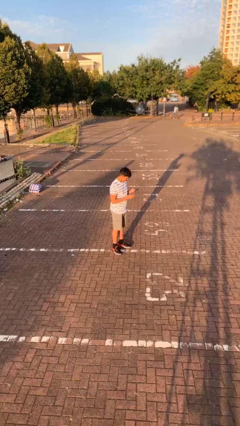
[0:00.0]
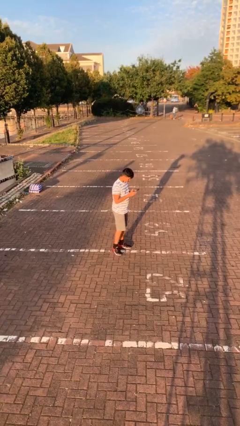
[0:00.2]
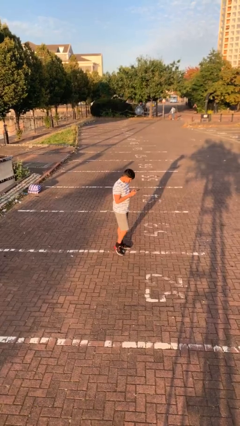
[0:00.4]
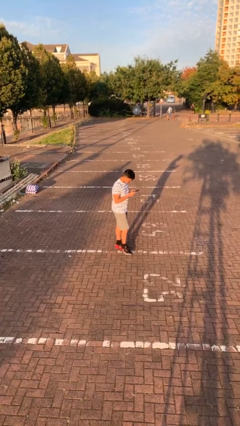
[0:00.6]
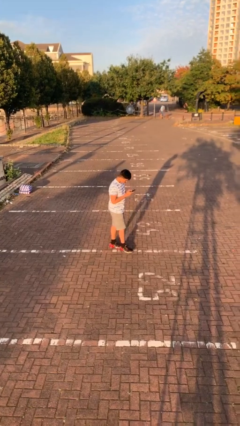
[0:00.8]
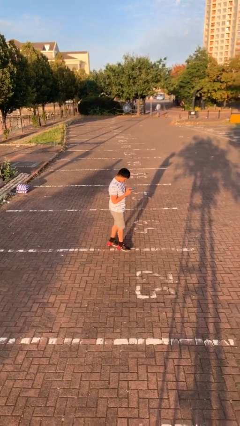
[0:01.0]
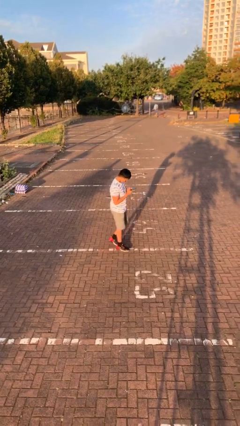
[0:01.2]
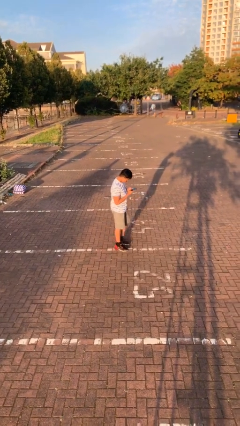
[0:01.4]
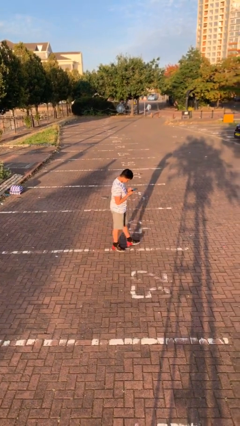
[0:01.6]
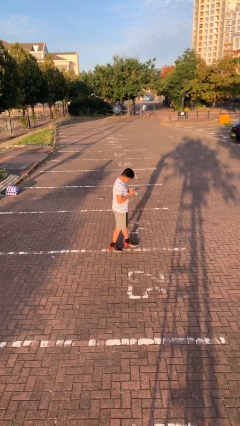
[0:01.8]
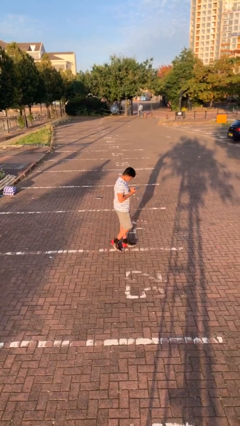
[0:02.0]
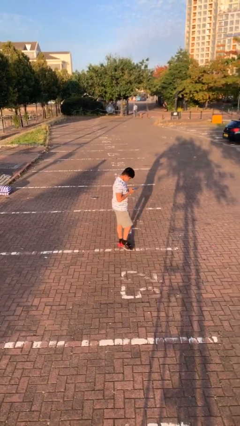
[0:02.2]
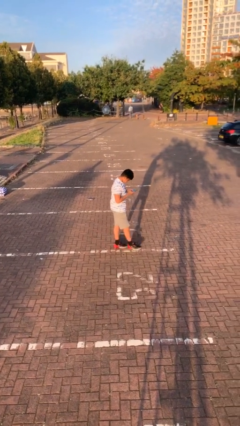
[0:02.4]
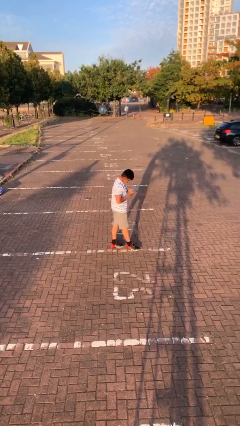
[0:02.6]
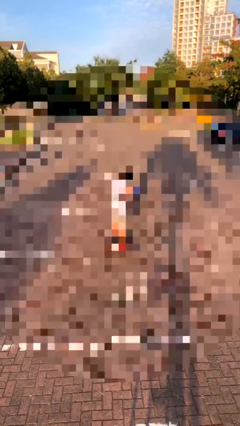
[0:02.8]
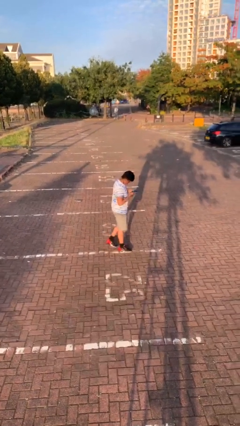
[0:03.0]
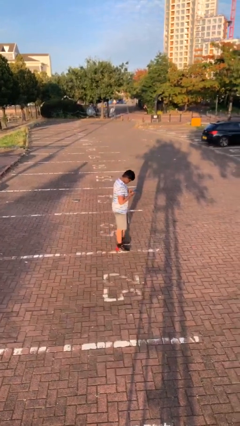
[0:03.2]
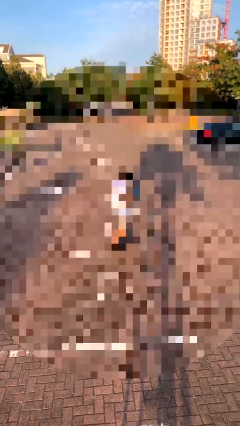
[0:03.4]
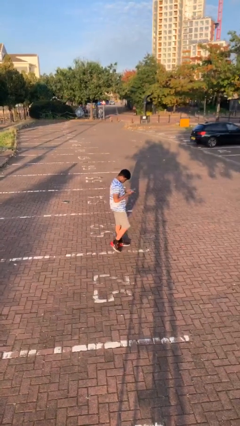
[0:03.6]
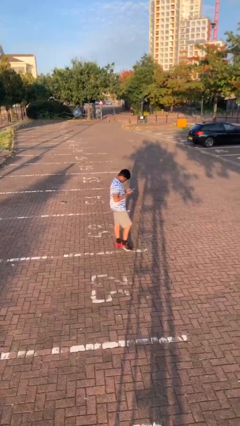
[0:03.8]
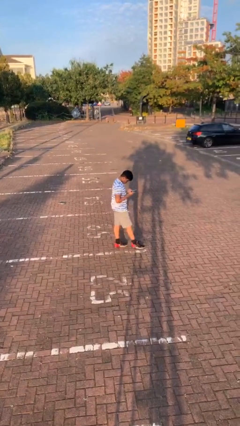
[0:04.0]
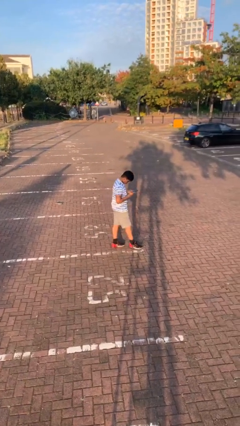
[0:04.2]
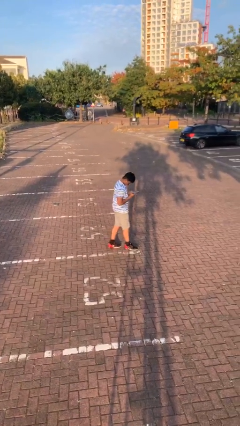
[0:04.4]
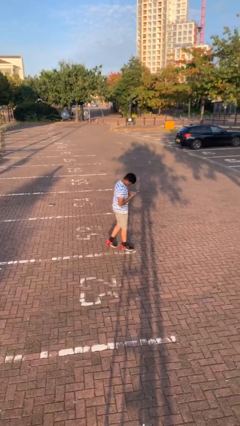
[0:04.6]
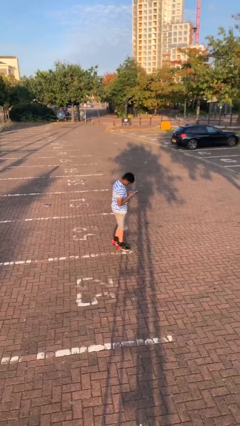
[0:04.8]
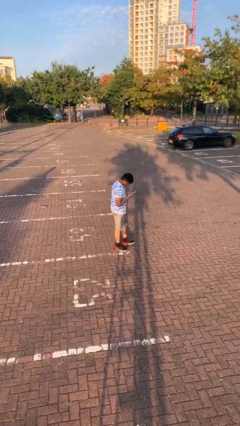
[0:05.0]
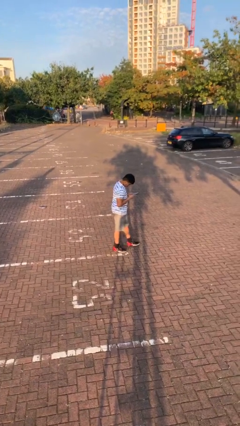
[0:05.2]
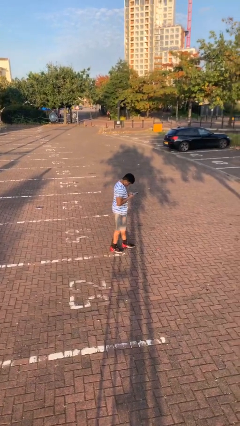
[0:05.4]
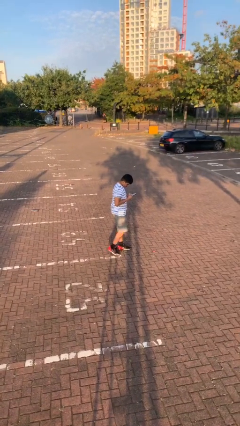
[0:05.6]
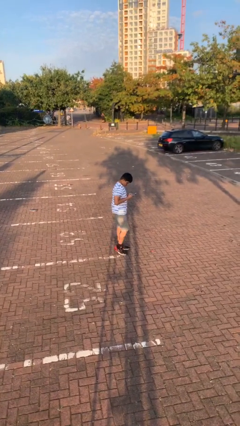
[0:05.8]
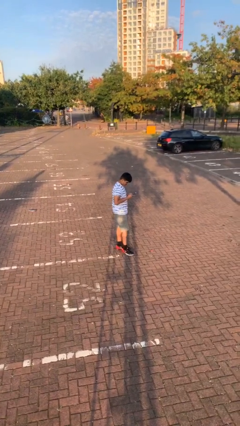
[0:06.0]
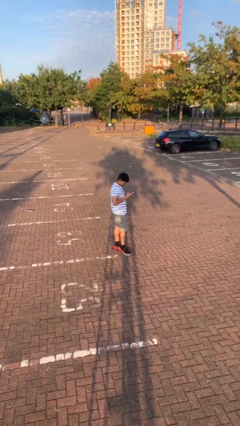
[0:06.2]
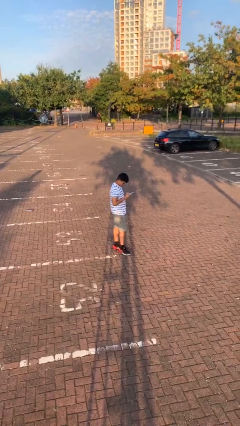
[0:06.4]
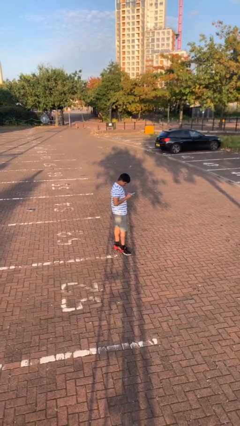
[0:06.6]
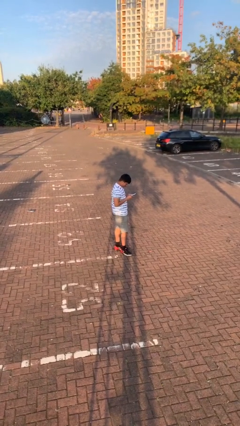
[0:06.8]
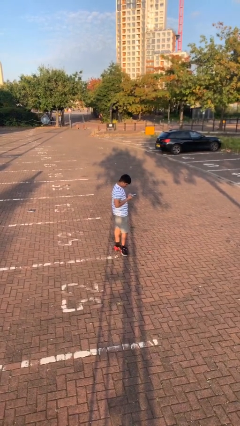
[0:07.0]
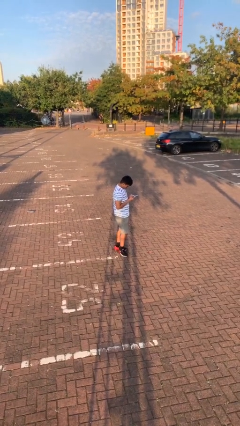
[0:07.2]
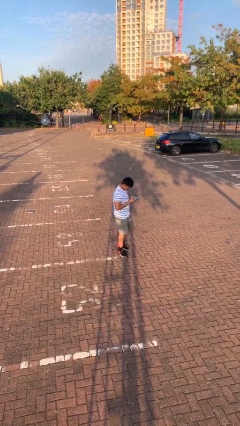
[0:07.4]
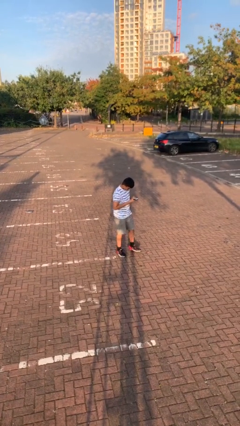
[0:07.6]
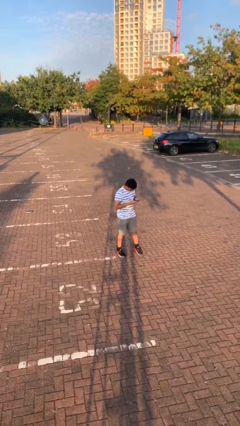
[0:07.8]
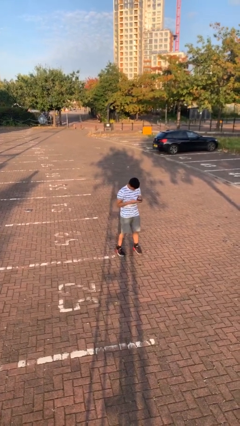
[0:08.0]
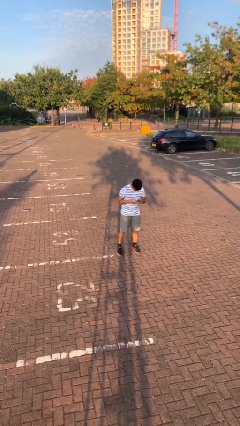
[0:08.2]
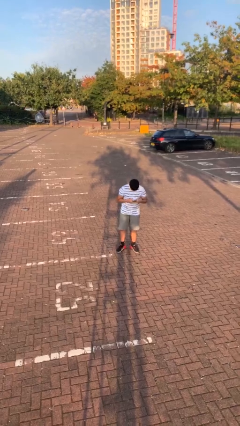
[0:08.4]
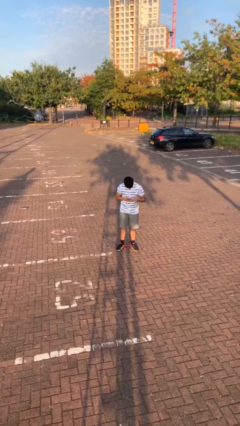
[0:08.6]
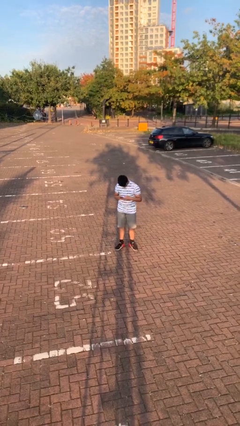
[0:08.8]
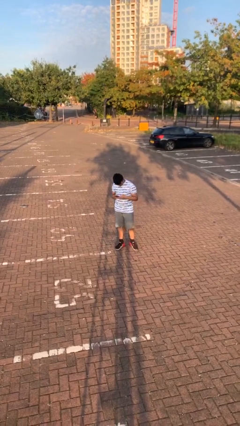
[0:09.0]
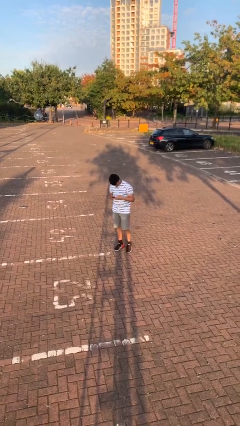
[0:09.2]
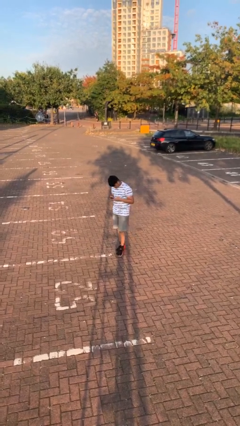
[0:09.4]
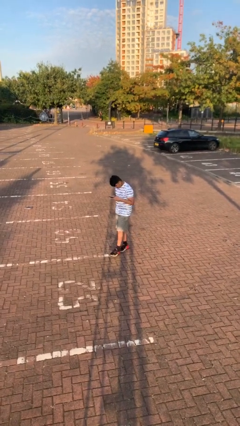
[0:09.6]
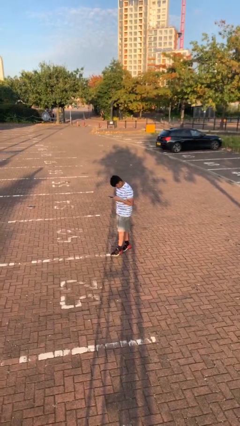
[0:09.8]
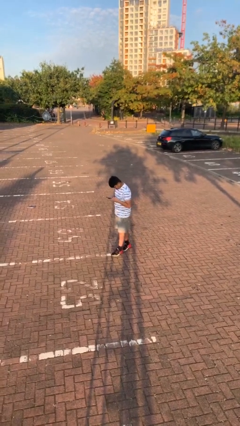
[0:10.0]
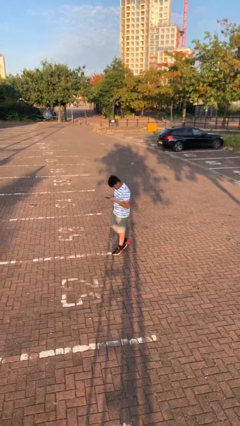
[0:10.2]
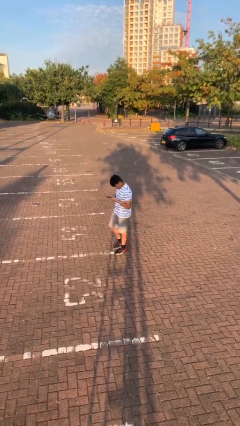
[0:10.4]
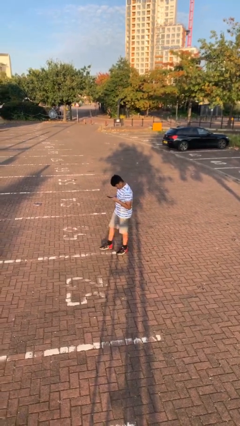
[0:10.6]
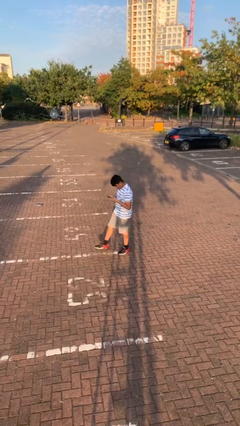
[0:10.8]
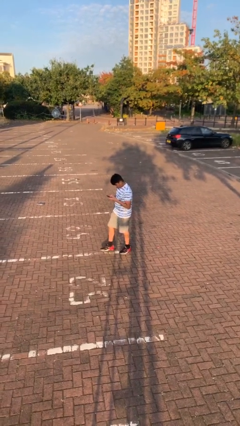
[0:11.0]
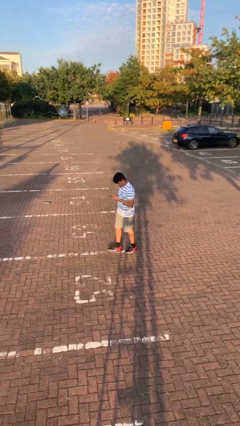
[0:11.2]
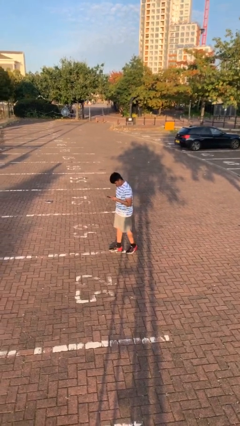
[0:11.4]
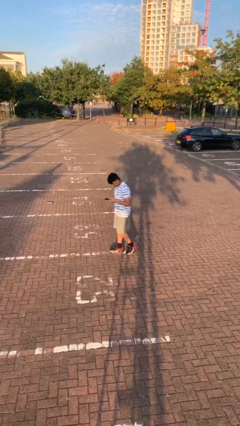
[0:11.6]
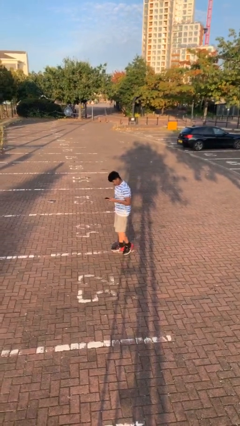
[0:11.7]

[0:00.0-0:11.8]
person texts on phone

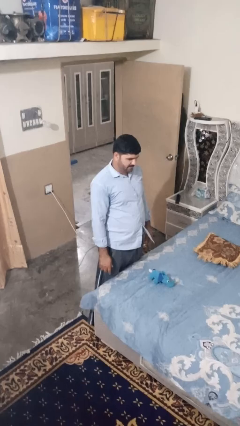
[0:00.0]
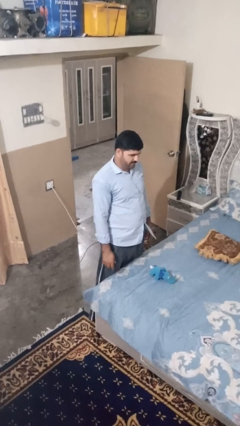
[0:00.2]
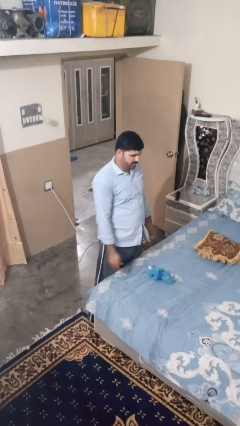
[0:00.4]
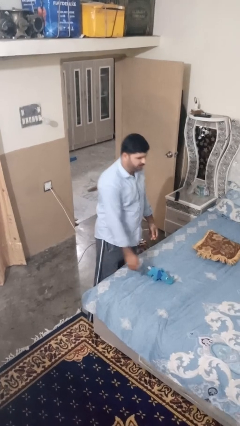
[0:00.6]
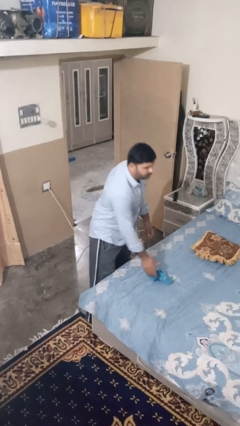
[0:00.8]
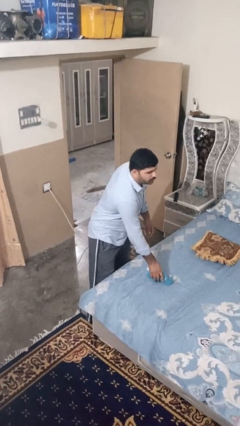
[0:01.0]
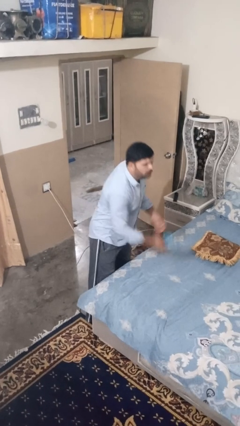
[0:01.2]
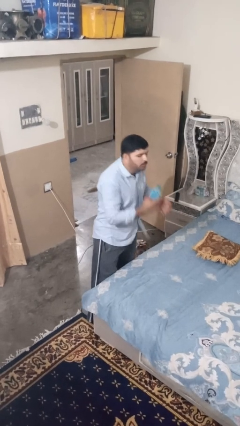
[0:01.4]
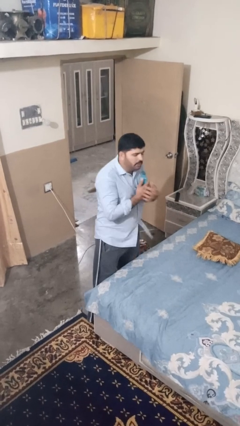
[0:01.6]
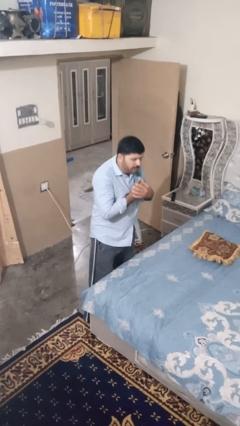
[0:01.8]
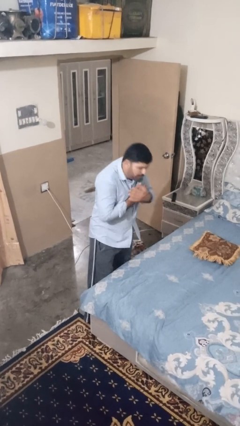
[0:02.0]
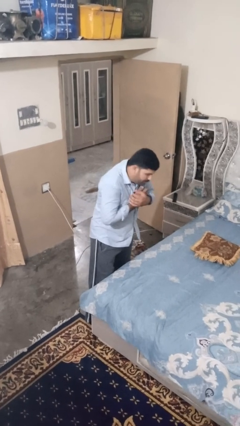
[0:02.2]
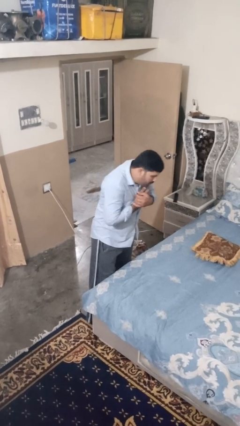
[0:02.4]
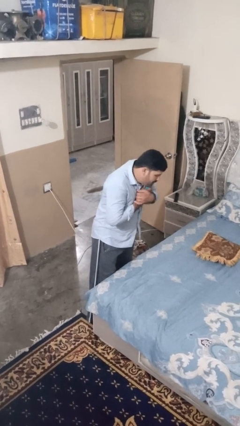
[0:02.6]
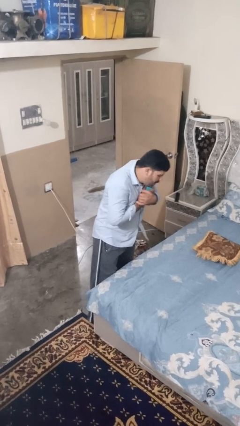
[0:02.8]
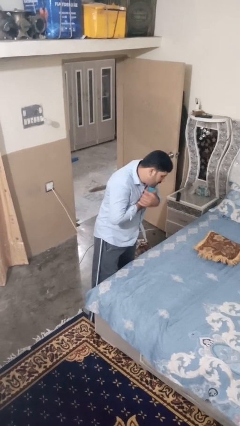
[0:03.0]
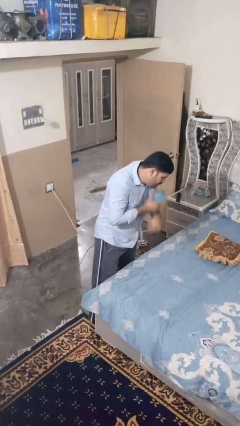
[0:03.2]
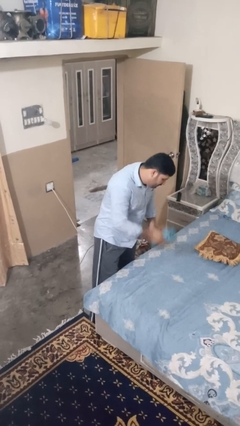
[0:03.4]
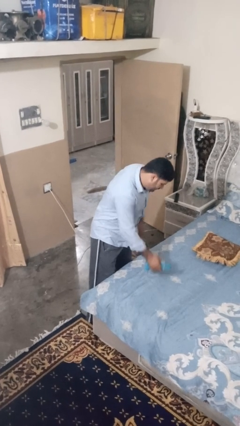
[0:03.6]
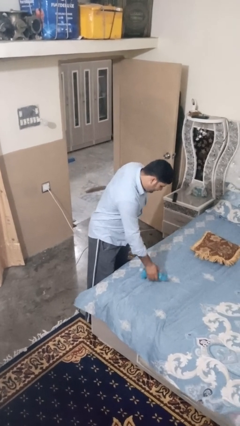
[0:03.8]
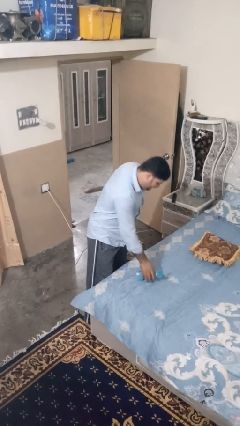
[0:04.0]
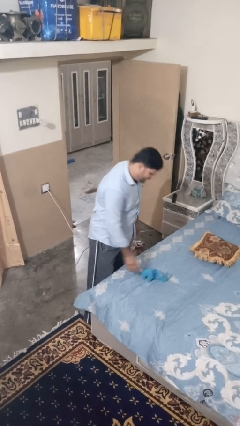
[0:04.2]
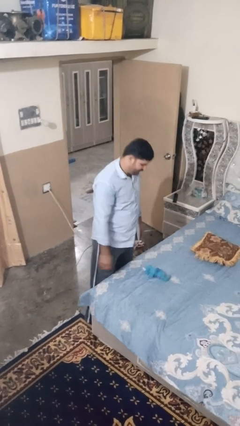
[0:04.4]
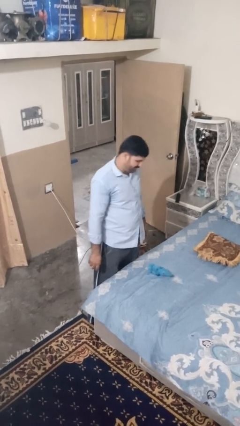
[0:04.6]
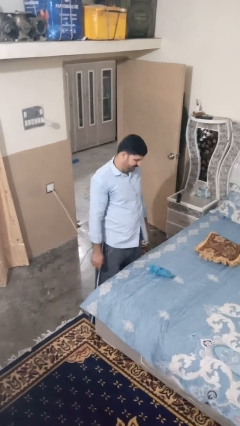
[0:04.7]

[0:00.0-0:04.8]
person hugs stuffed animal

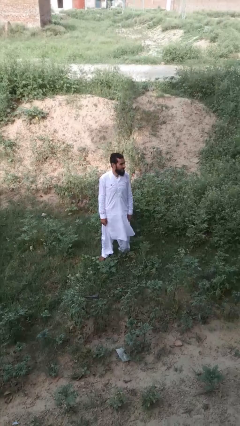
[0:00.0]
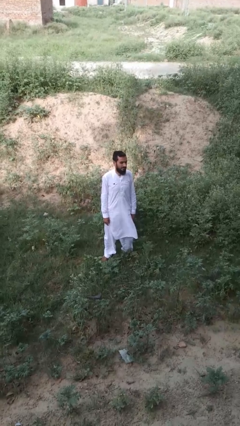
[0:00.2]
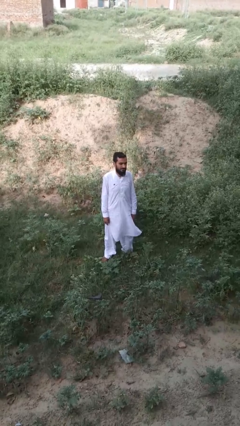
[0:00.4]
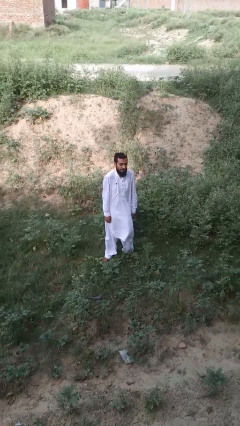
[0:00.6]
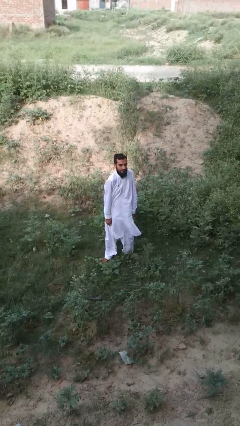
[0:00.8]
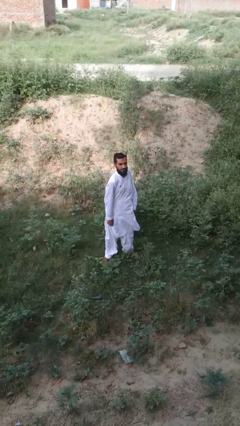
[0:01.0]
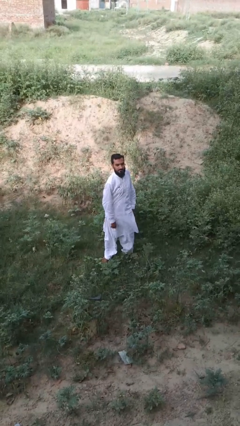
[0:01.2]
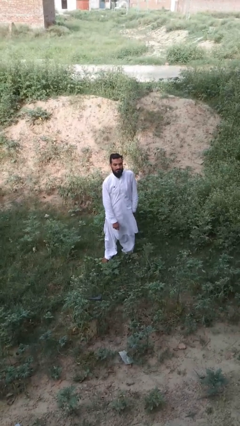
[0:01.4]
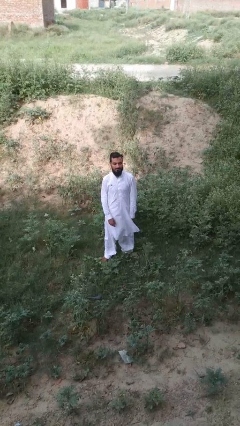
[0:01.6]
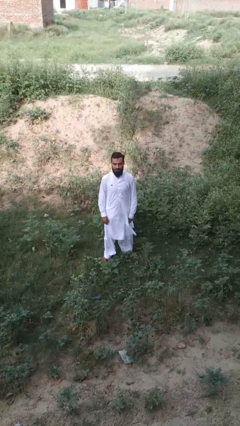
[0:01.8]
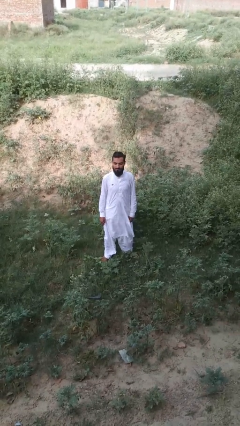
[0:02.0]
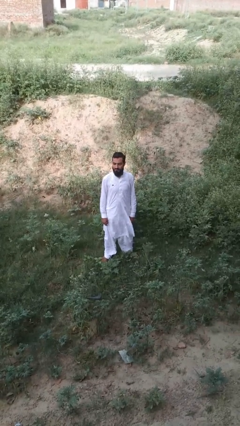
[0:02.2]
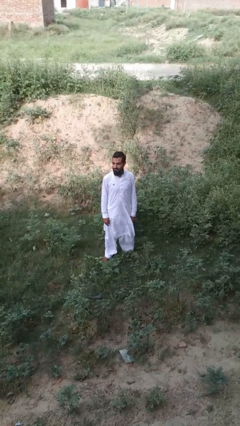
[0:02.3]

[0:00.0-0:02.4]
person shrugs
